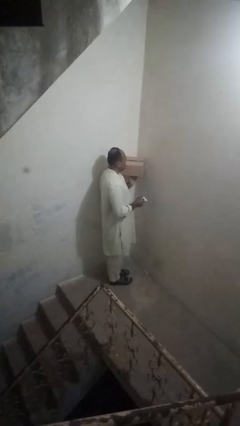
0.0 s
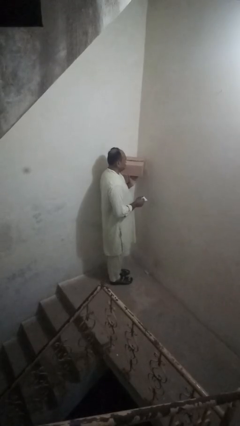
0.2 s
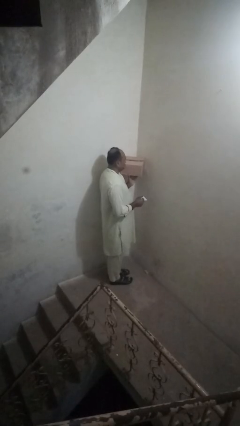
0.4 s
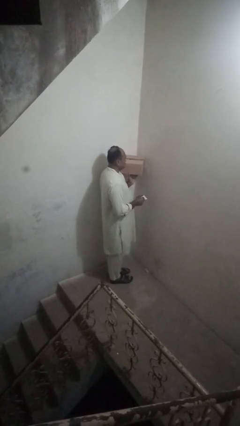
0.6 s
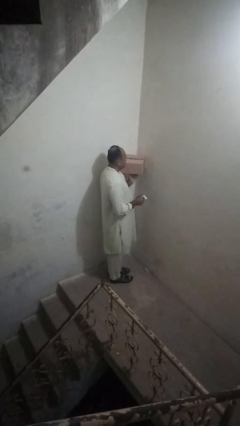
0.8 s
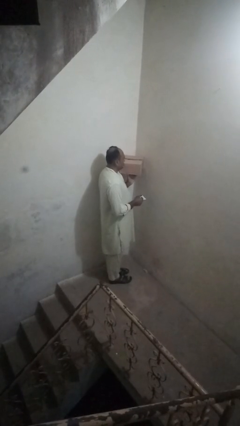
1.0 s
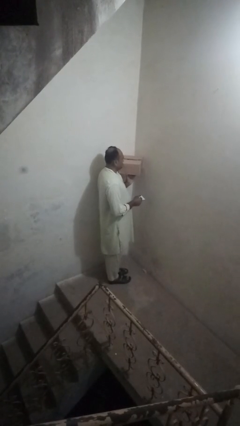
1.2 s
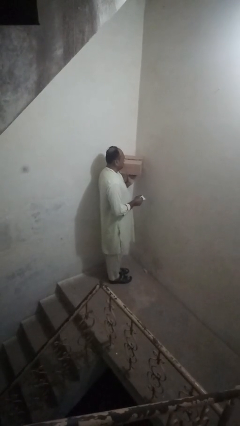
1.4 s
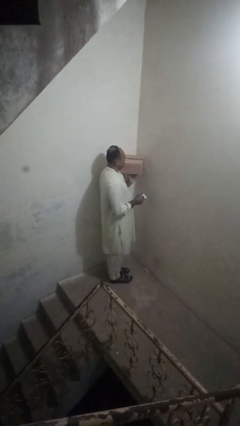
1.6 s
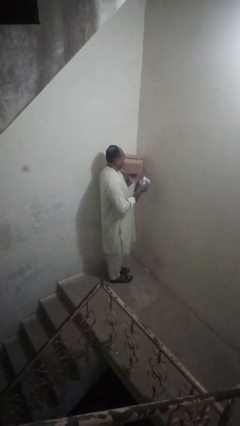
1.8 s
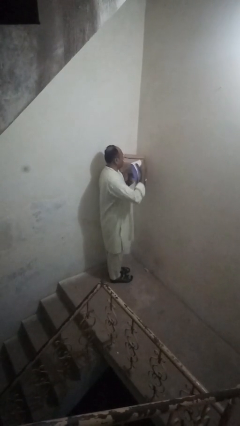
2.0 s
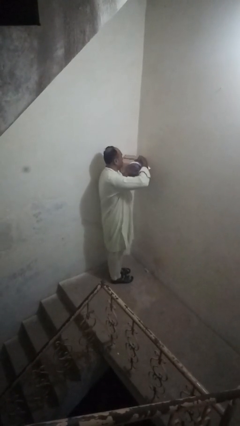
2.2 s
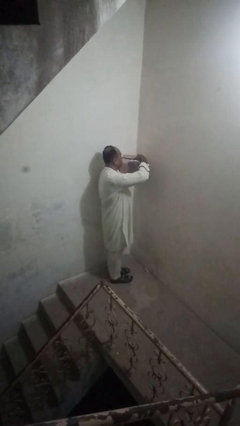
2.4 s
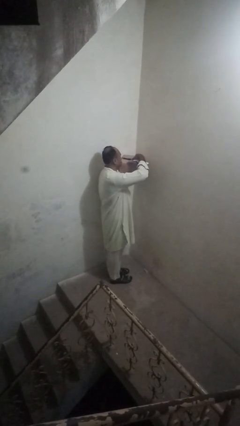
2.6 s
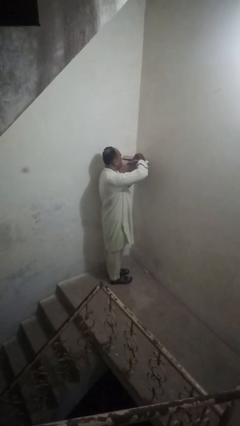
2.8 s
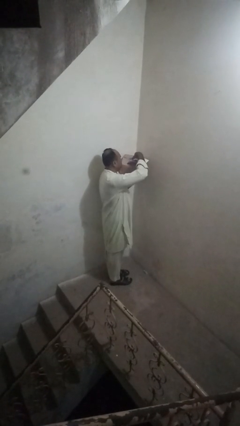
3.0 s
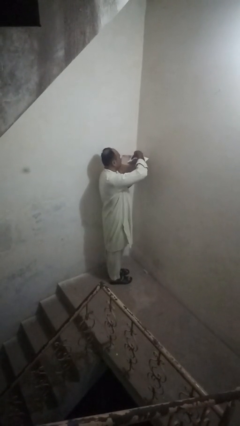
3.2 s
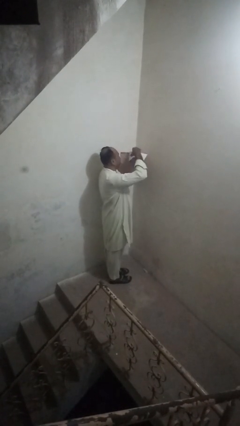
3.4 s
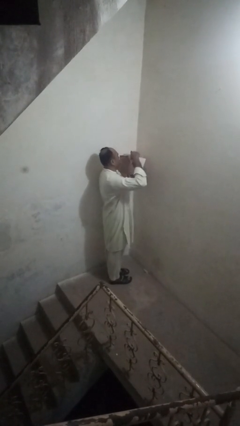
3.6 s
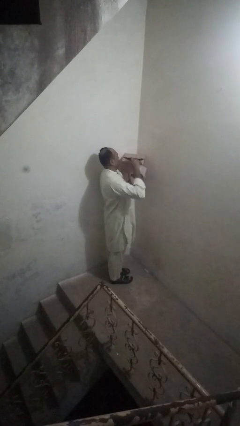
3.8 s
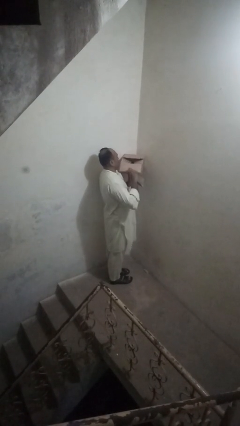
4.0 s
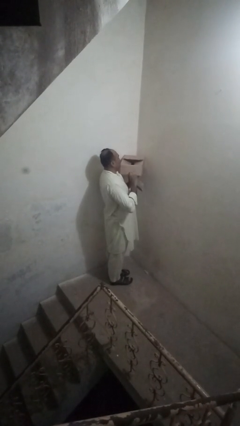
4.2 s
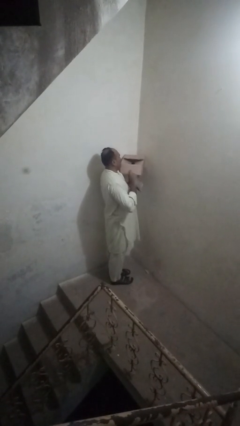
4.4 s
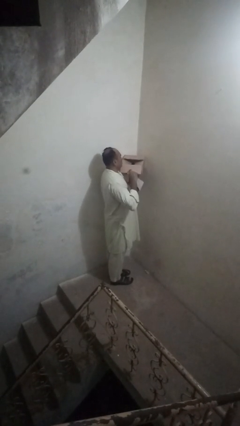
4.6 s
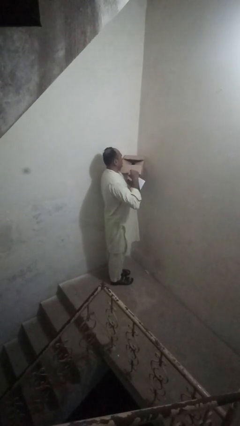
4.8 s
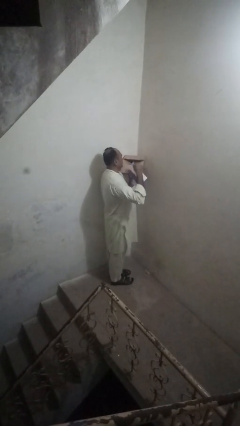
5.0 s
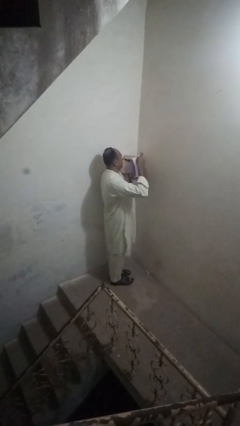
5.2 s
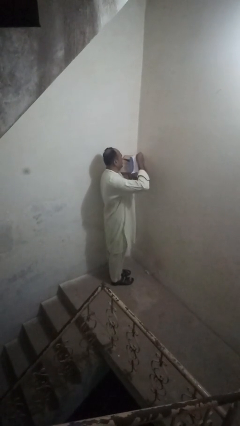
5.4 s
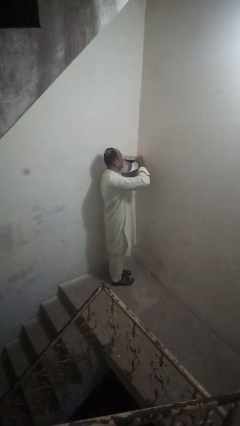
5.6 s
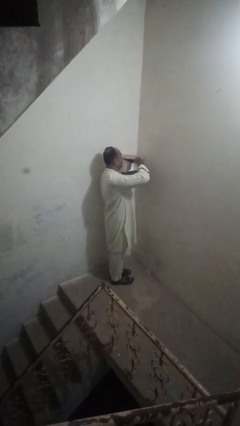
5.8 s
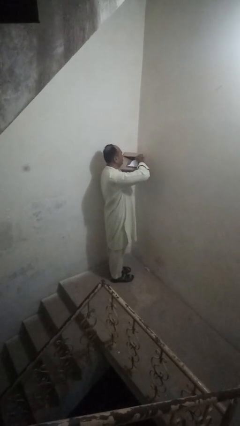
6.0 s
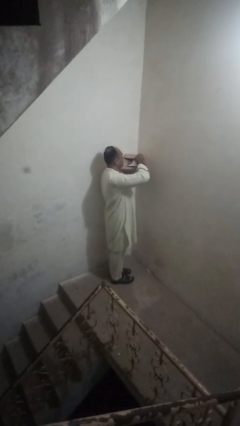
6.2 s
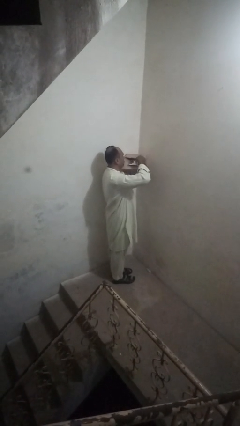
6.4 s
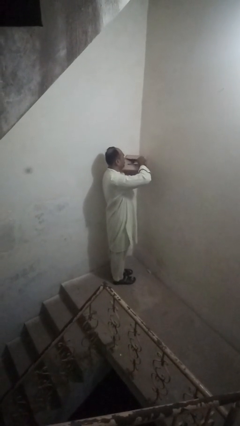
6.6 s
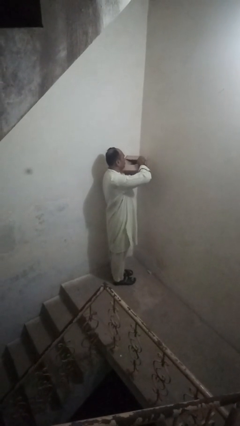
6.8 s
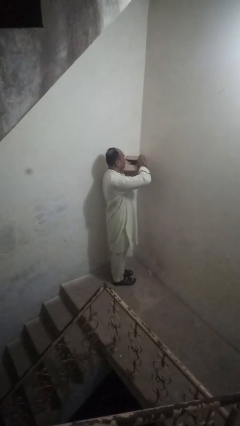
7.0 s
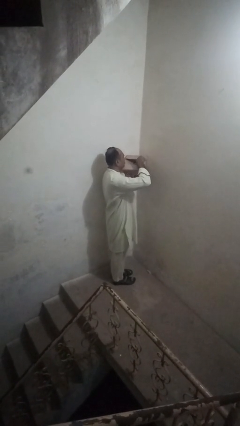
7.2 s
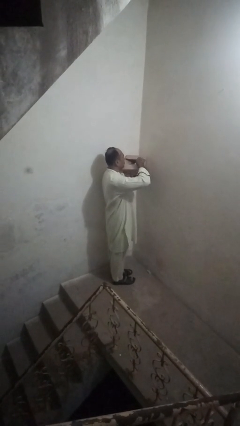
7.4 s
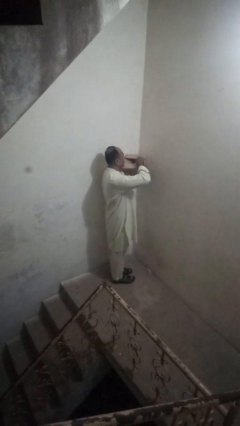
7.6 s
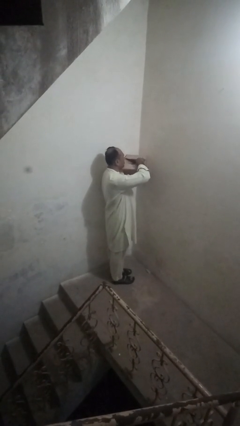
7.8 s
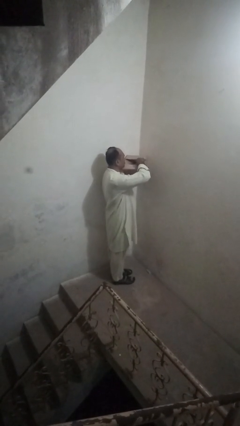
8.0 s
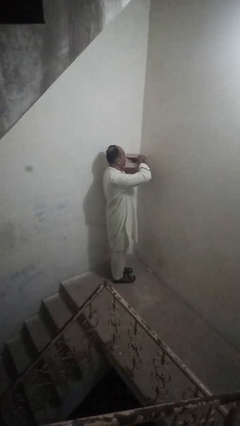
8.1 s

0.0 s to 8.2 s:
person puts letters in mailbox

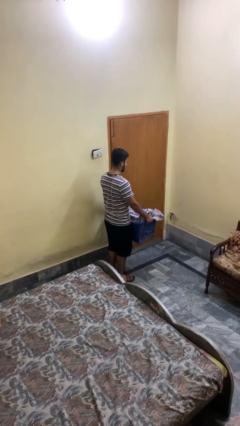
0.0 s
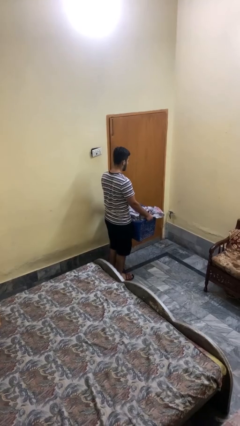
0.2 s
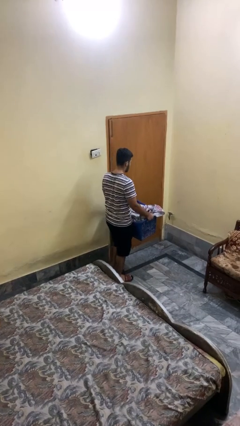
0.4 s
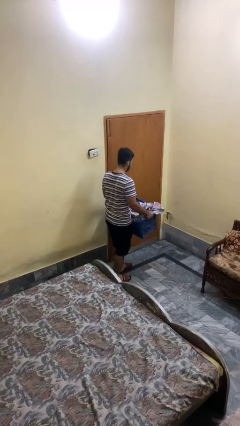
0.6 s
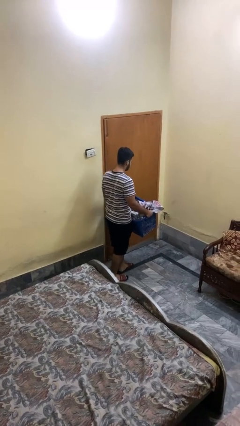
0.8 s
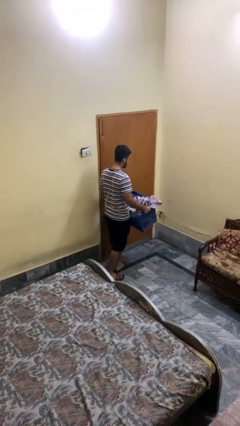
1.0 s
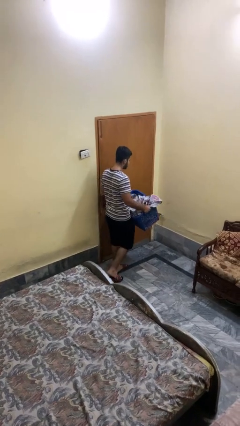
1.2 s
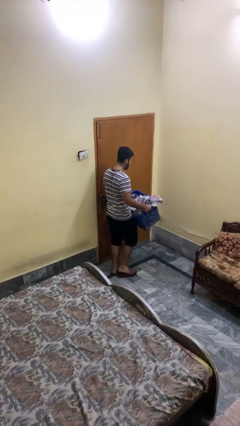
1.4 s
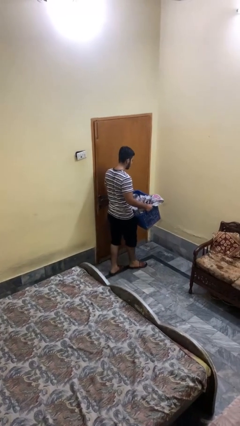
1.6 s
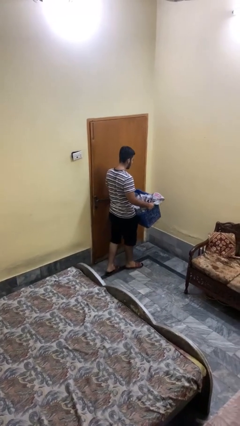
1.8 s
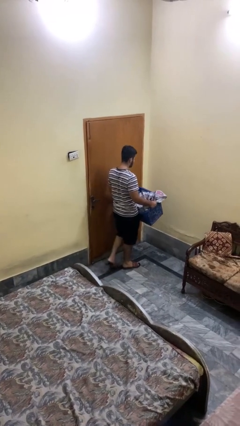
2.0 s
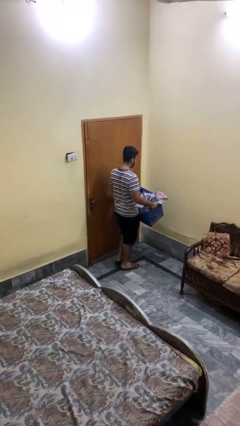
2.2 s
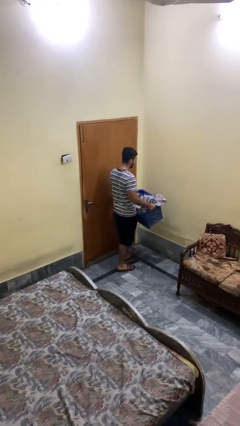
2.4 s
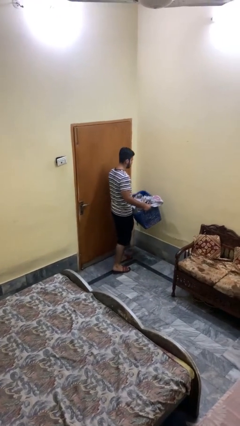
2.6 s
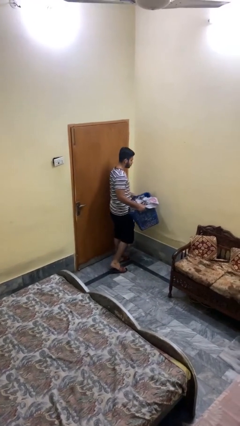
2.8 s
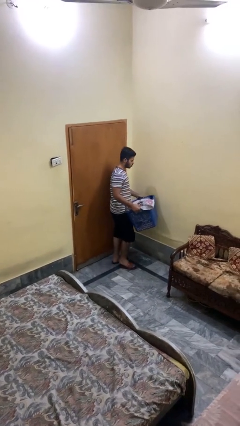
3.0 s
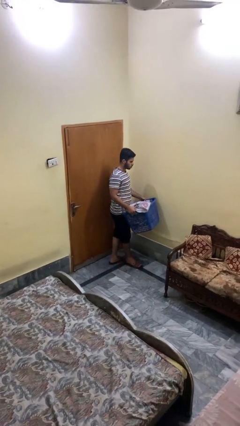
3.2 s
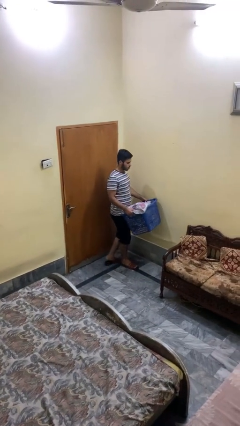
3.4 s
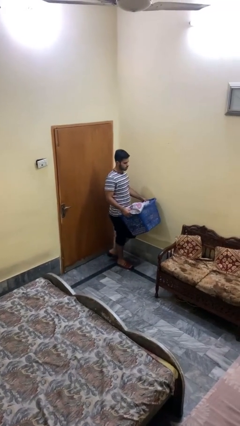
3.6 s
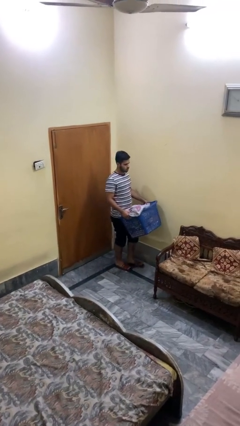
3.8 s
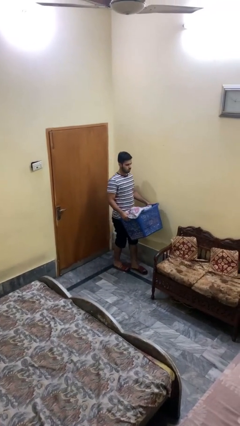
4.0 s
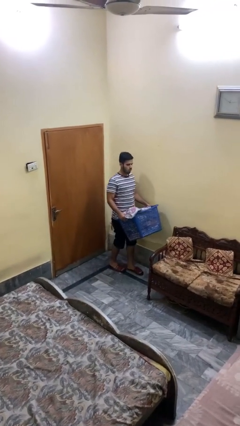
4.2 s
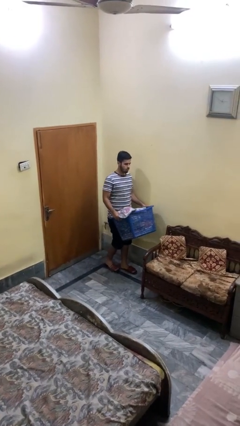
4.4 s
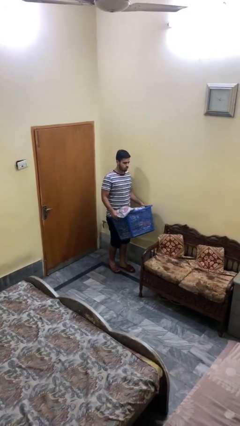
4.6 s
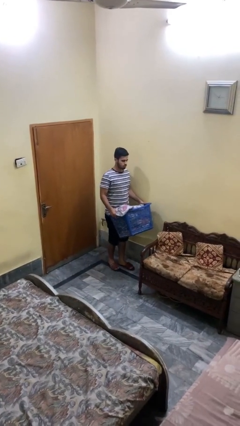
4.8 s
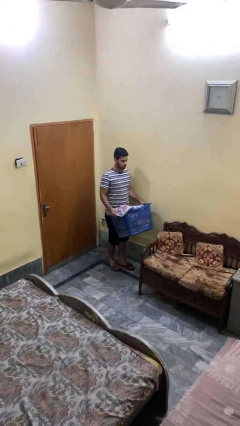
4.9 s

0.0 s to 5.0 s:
person carries laundry basket

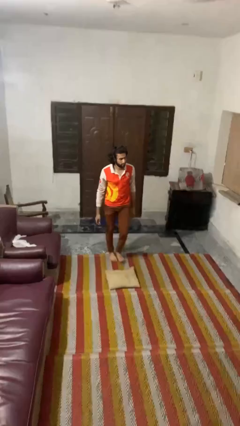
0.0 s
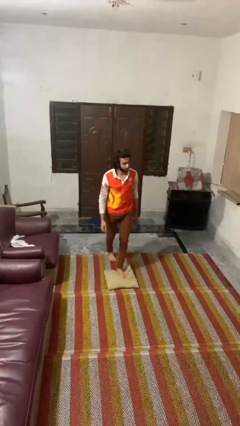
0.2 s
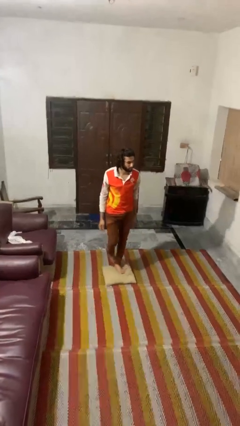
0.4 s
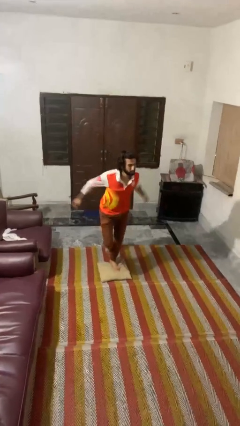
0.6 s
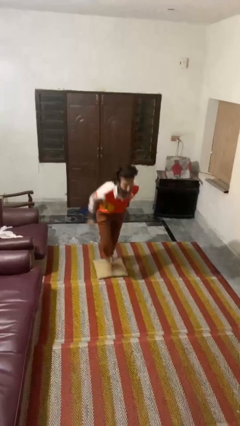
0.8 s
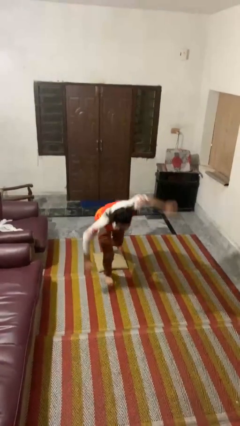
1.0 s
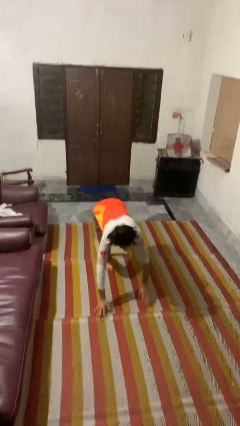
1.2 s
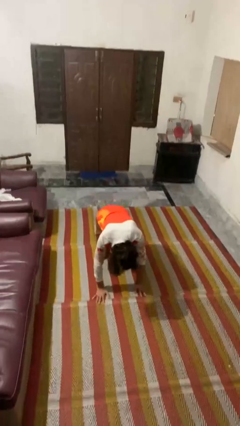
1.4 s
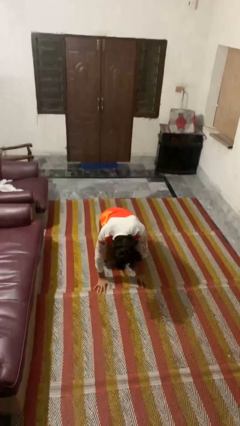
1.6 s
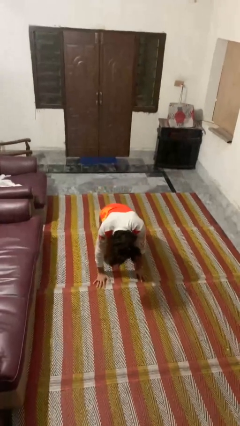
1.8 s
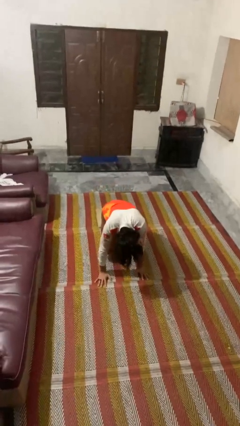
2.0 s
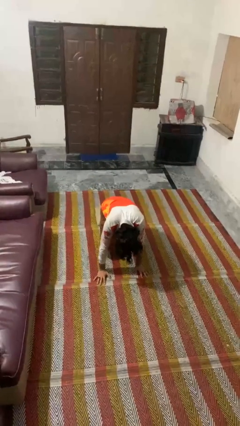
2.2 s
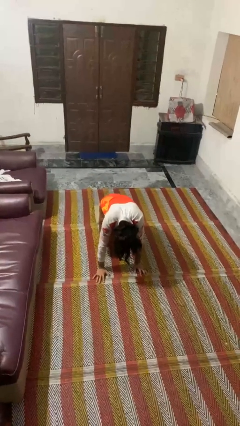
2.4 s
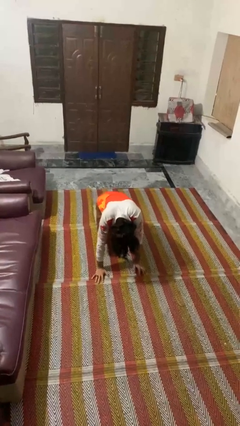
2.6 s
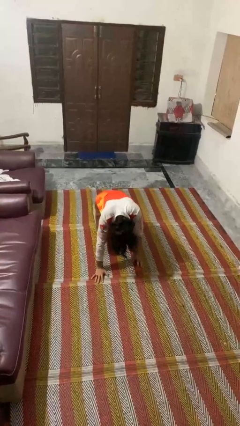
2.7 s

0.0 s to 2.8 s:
person trips on object on floor

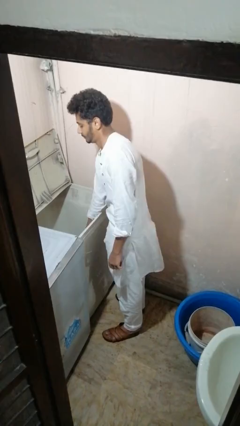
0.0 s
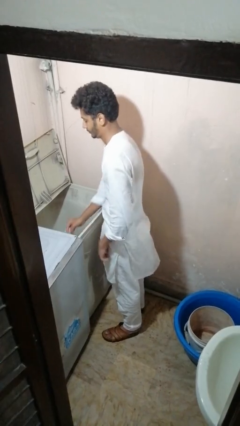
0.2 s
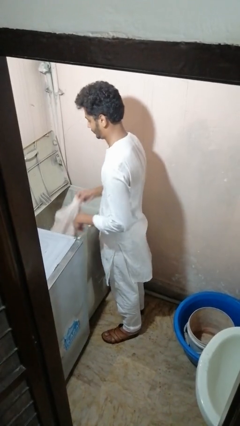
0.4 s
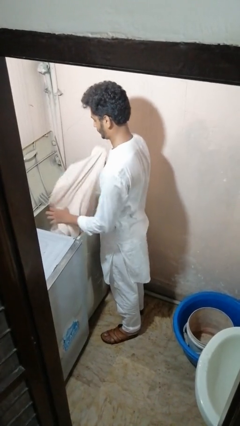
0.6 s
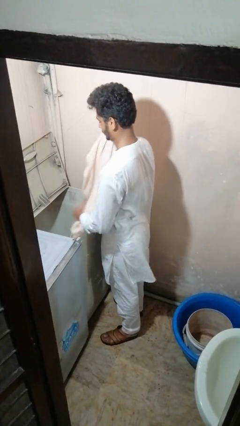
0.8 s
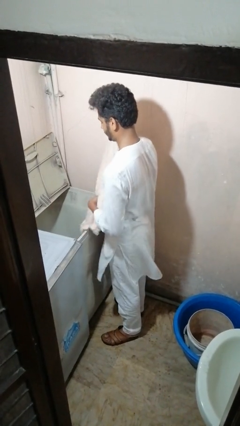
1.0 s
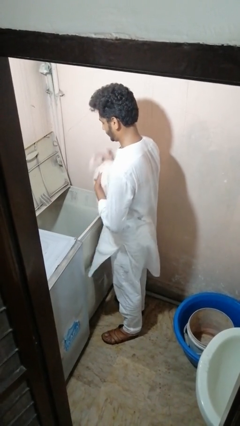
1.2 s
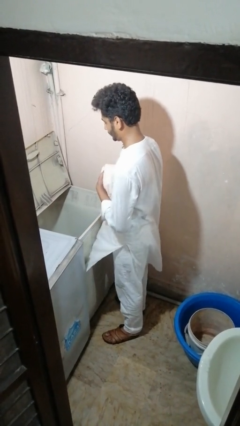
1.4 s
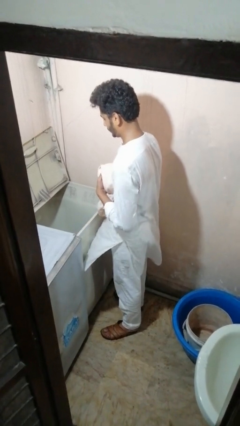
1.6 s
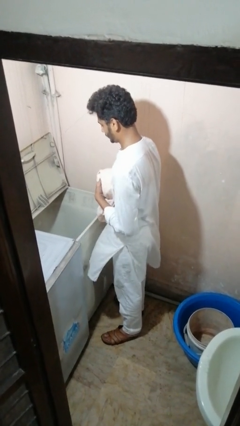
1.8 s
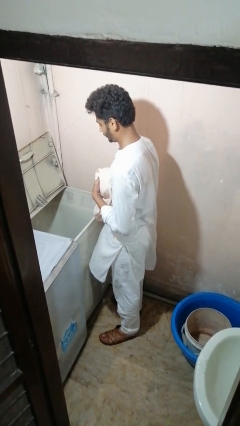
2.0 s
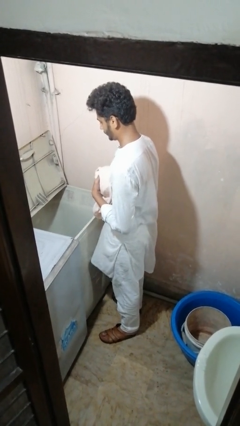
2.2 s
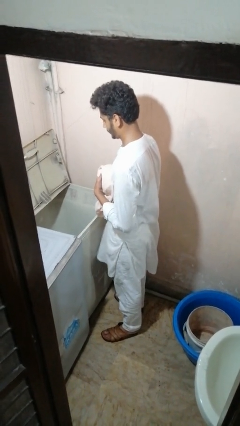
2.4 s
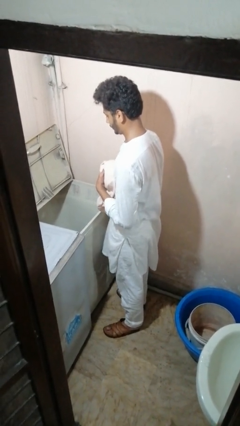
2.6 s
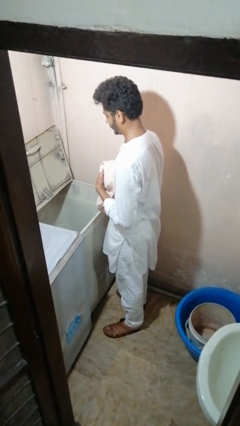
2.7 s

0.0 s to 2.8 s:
person unloads clotheswasher
